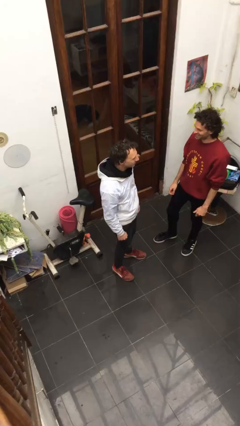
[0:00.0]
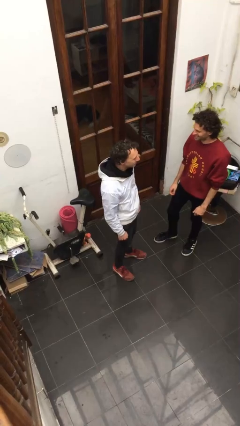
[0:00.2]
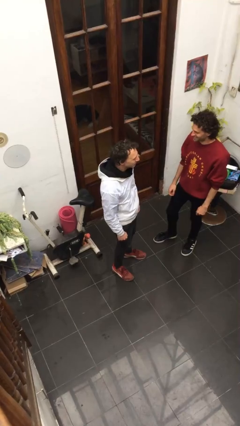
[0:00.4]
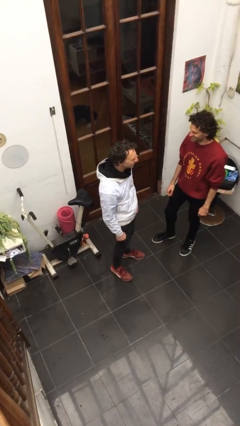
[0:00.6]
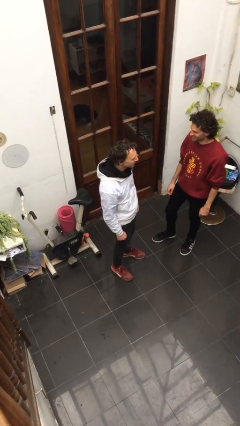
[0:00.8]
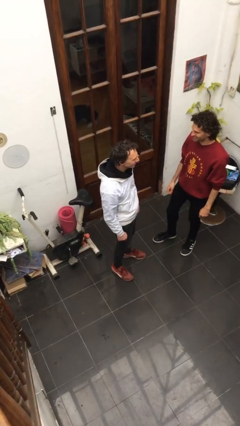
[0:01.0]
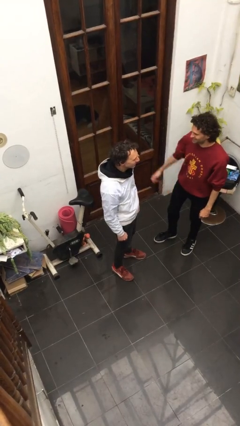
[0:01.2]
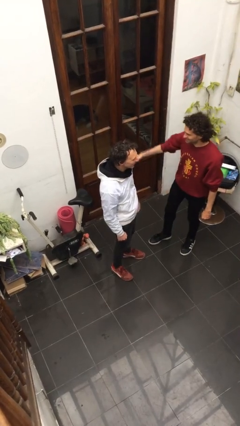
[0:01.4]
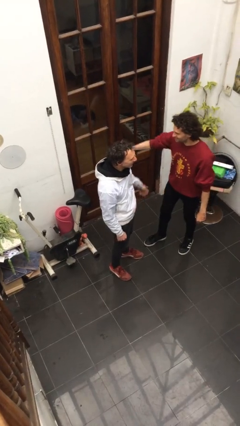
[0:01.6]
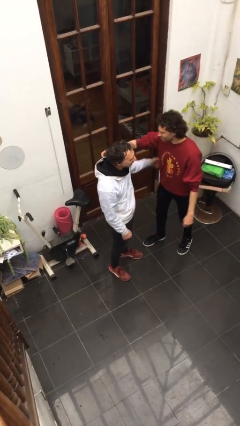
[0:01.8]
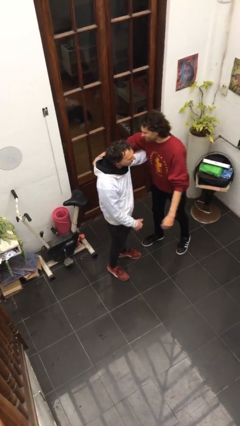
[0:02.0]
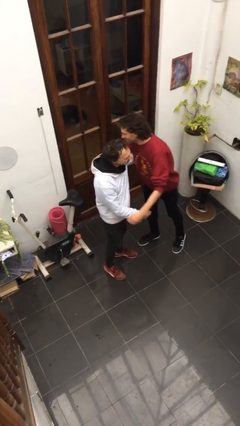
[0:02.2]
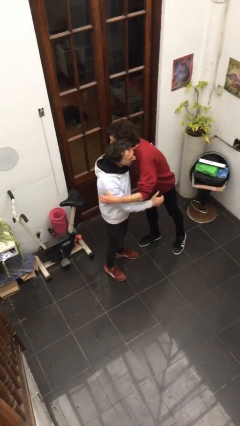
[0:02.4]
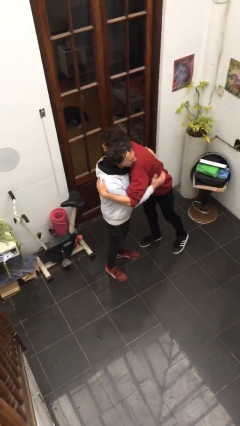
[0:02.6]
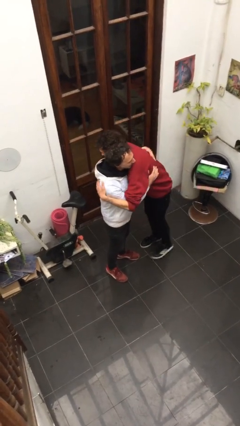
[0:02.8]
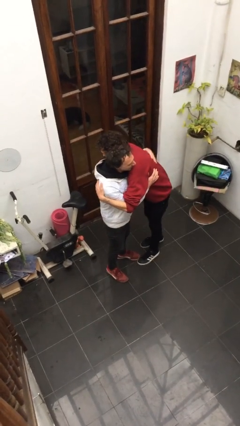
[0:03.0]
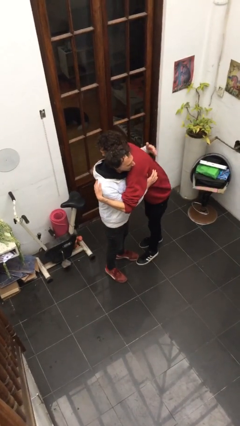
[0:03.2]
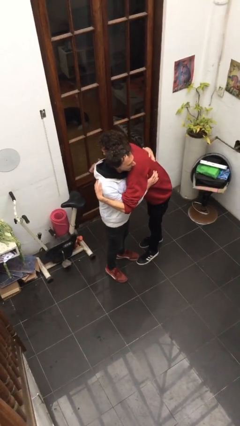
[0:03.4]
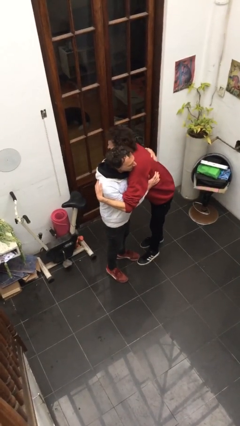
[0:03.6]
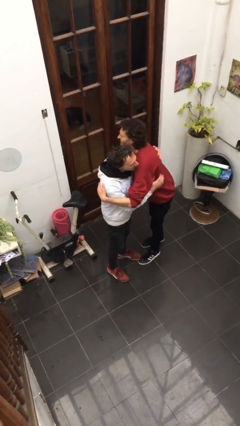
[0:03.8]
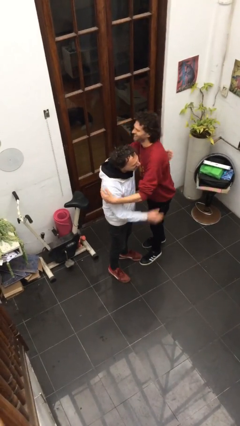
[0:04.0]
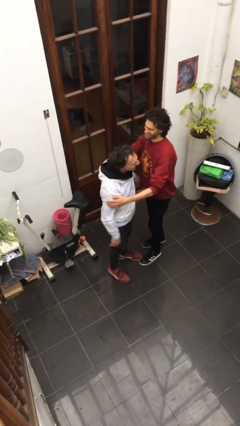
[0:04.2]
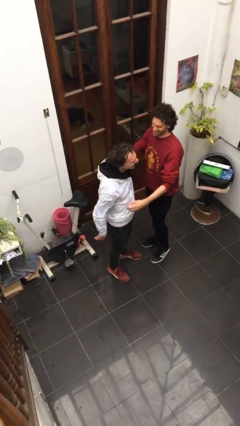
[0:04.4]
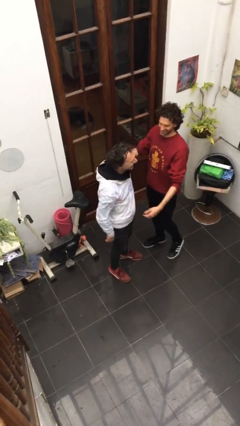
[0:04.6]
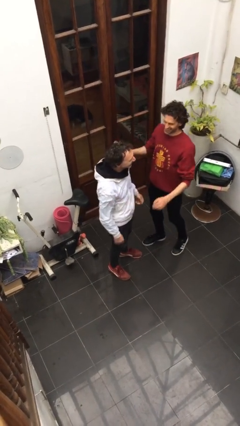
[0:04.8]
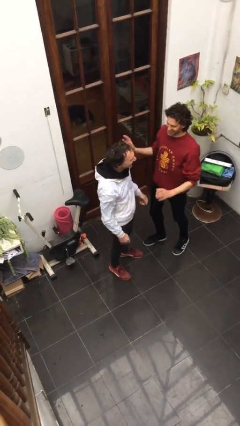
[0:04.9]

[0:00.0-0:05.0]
person embraces person

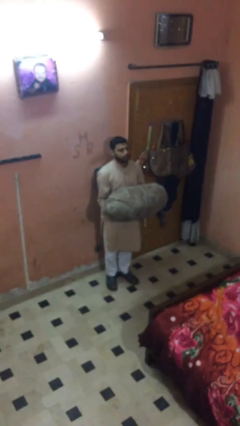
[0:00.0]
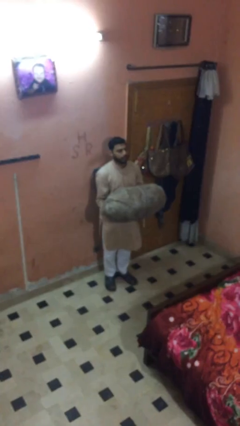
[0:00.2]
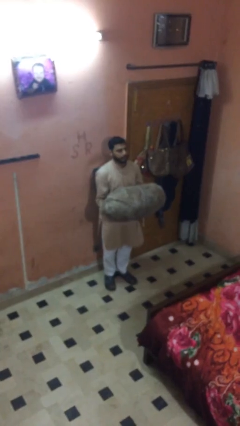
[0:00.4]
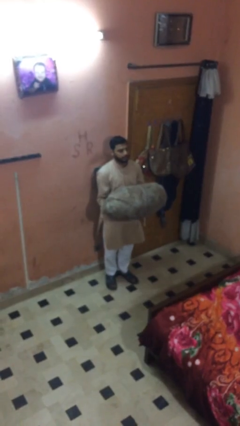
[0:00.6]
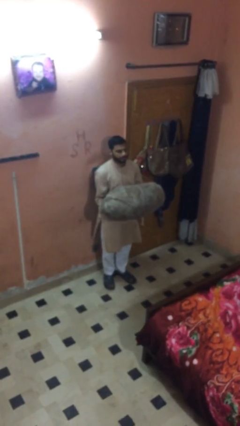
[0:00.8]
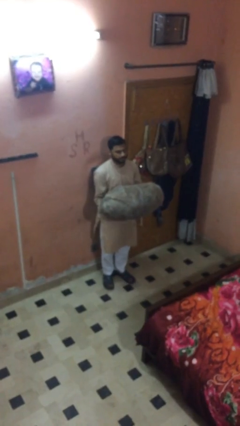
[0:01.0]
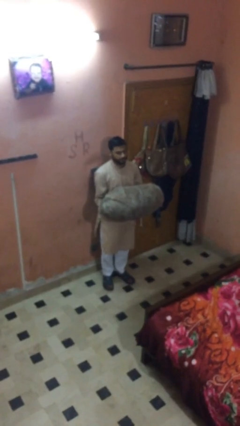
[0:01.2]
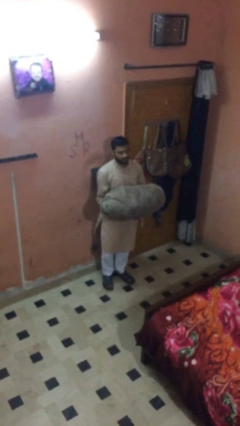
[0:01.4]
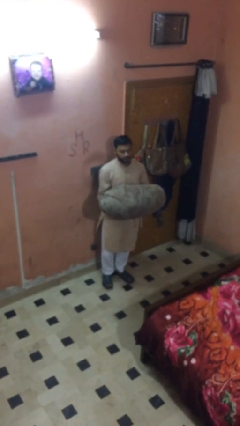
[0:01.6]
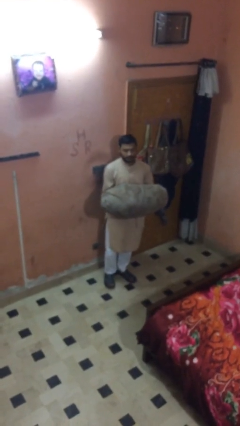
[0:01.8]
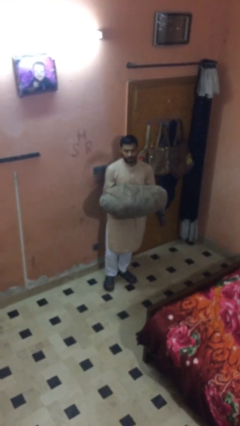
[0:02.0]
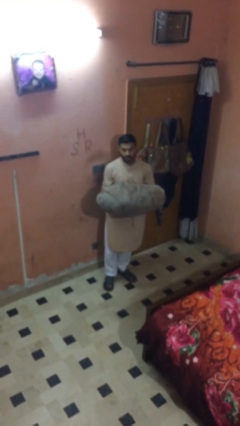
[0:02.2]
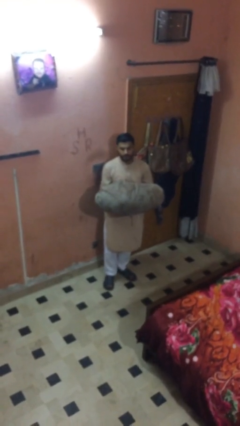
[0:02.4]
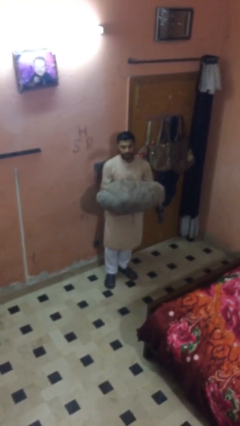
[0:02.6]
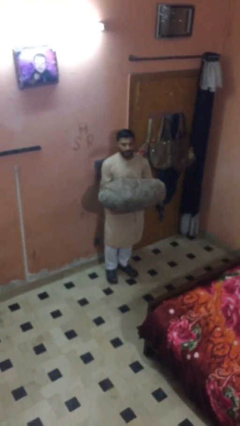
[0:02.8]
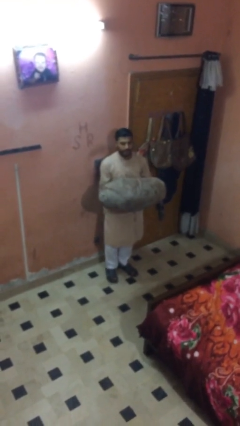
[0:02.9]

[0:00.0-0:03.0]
person carries heavy object

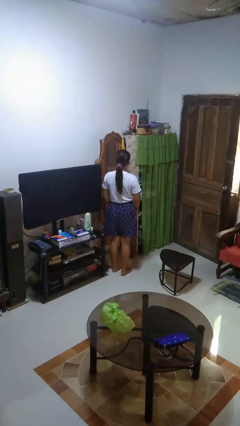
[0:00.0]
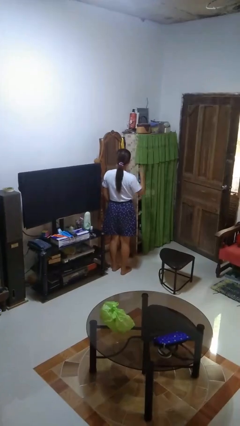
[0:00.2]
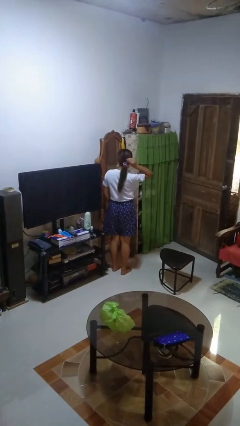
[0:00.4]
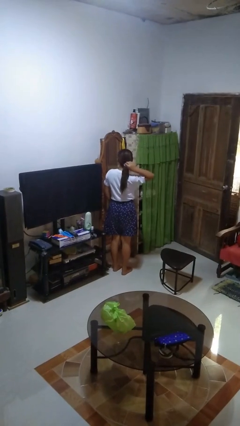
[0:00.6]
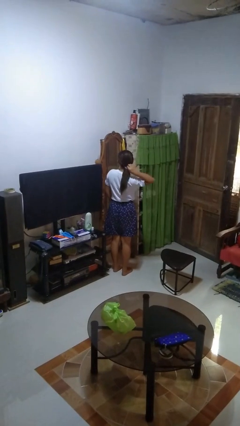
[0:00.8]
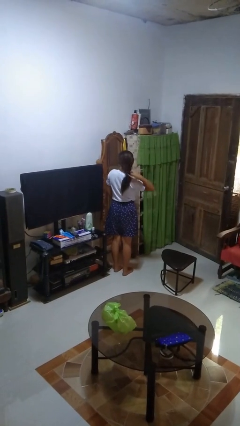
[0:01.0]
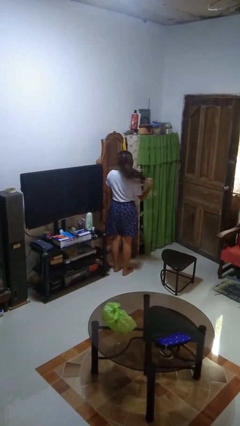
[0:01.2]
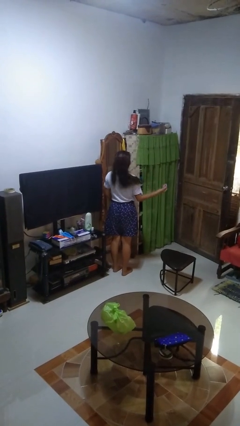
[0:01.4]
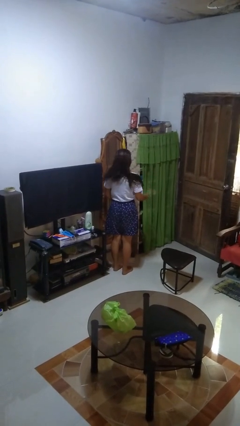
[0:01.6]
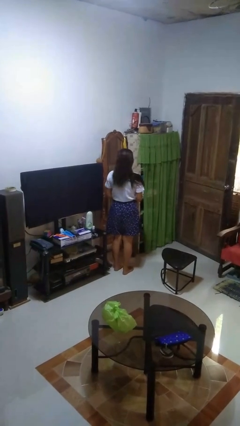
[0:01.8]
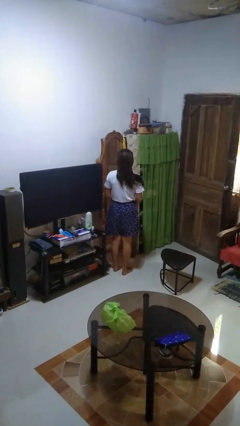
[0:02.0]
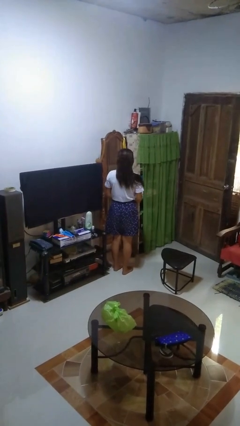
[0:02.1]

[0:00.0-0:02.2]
person takes off hairtie

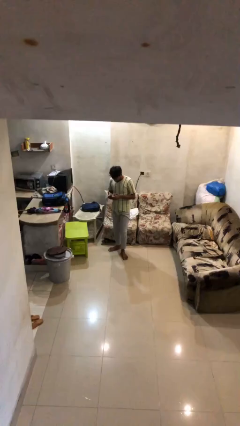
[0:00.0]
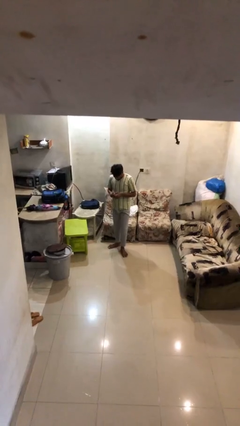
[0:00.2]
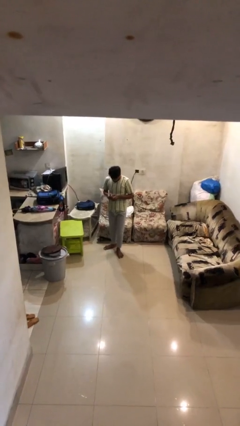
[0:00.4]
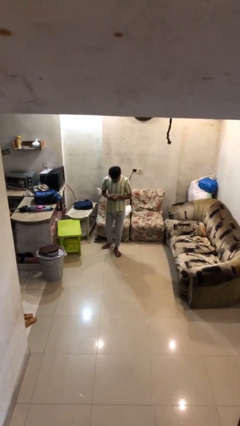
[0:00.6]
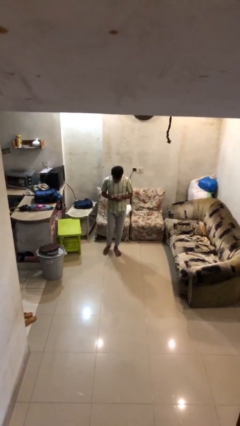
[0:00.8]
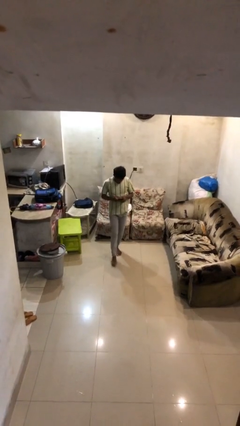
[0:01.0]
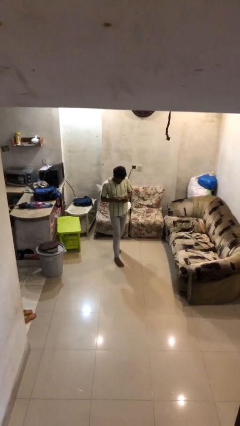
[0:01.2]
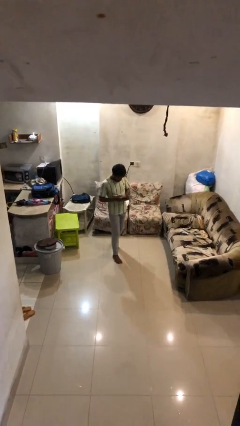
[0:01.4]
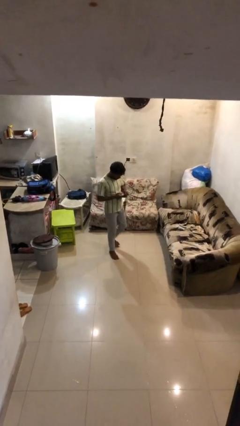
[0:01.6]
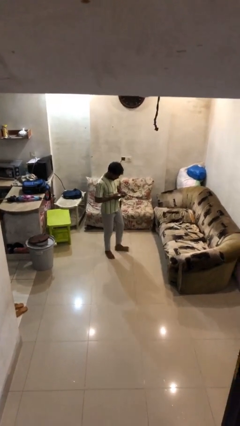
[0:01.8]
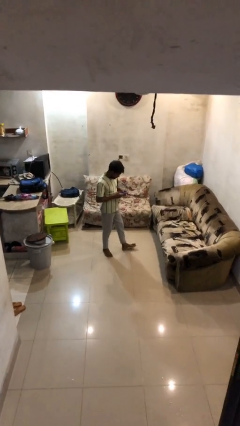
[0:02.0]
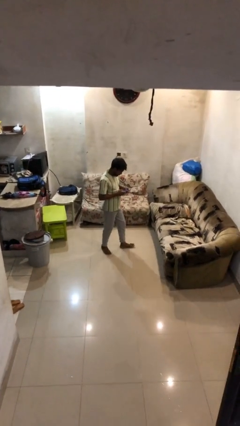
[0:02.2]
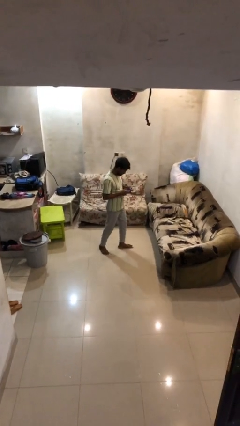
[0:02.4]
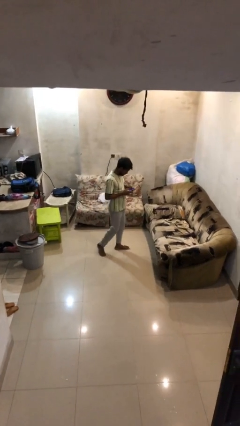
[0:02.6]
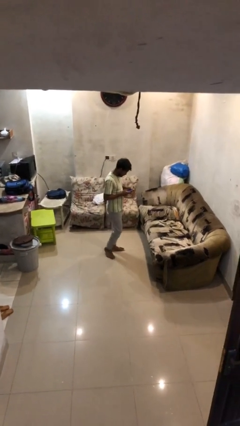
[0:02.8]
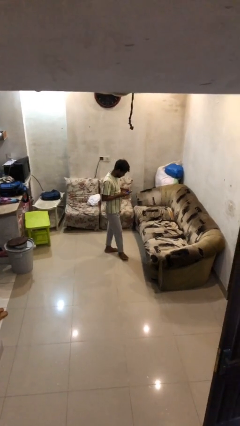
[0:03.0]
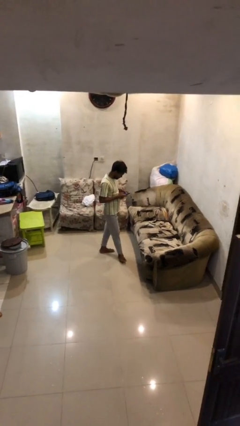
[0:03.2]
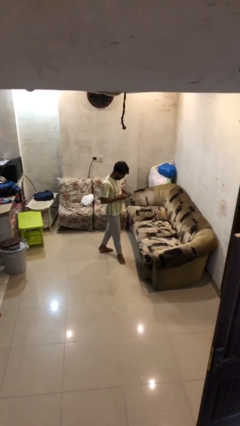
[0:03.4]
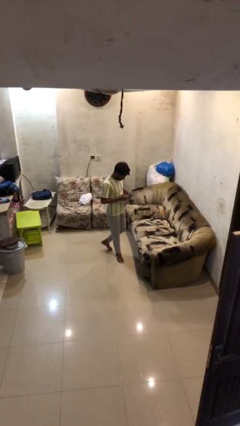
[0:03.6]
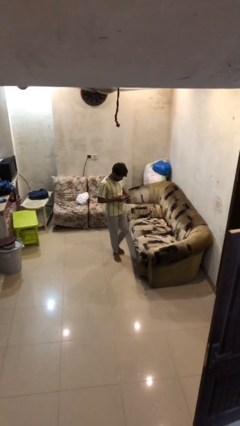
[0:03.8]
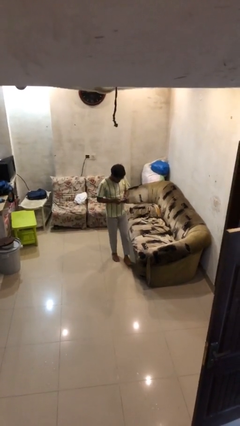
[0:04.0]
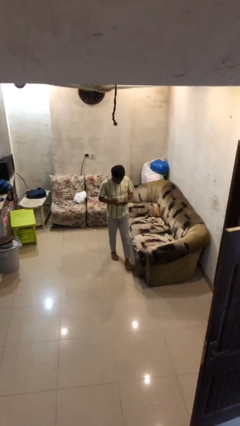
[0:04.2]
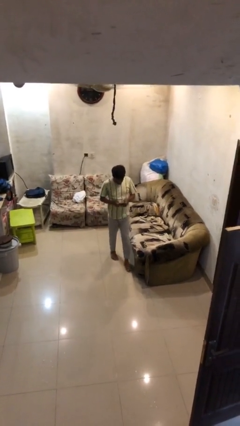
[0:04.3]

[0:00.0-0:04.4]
person texts on phone

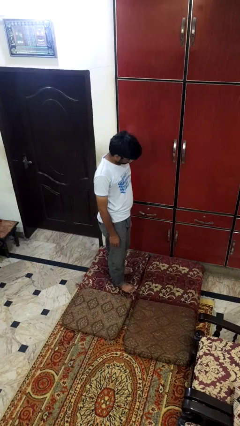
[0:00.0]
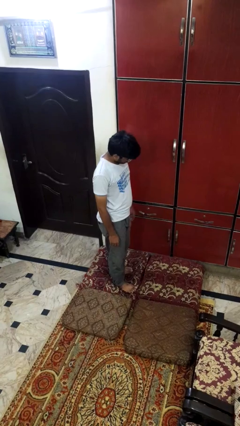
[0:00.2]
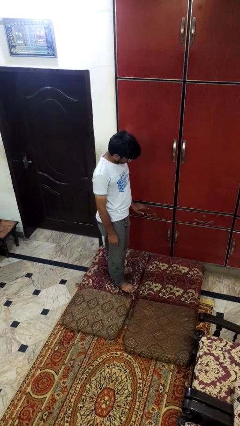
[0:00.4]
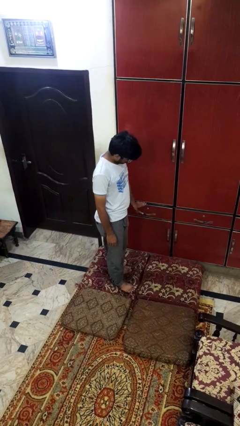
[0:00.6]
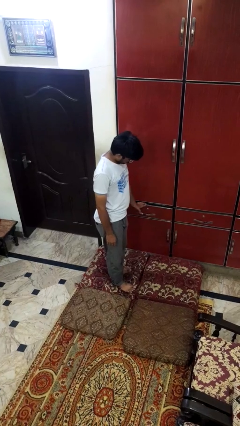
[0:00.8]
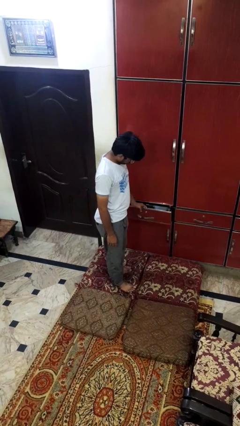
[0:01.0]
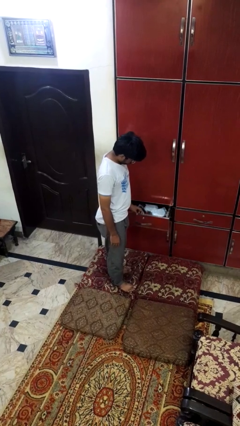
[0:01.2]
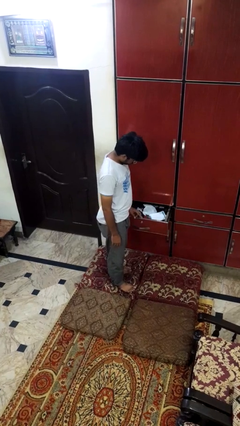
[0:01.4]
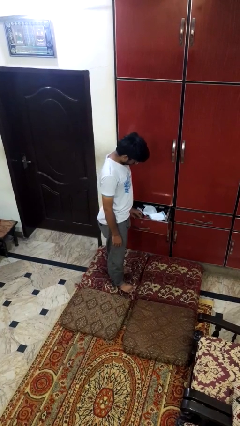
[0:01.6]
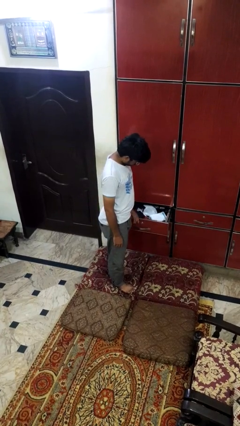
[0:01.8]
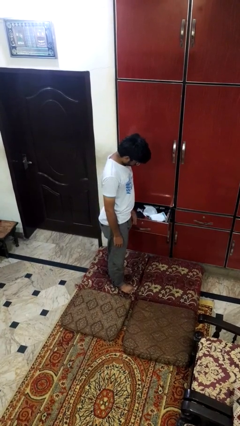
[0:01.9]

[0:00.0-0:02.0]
person opens dresser drawer

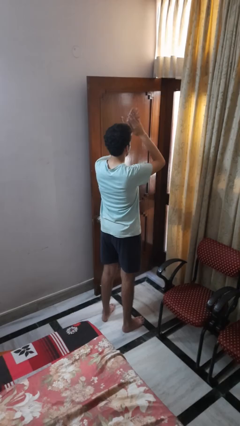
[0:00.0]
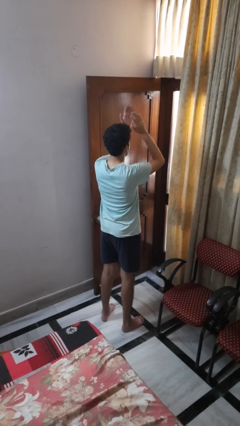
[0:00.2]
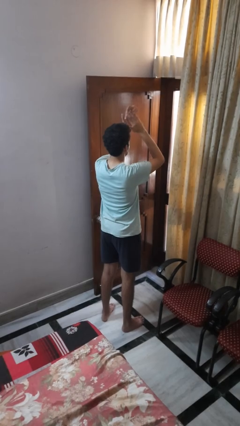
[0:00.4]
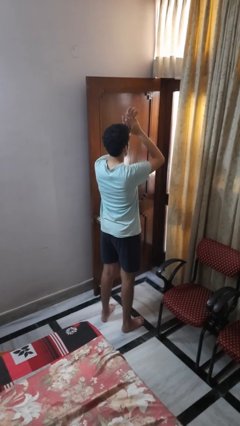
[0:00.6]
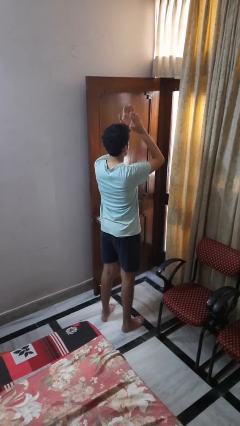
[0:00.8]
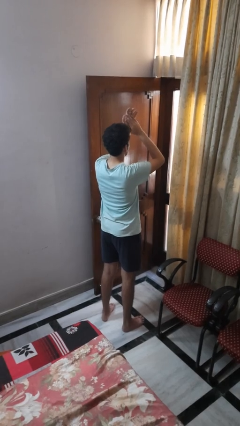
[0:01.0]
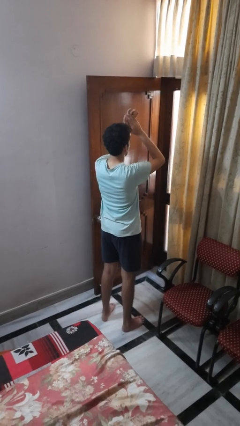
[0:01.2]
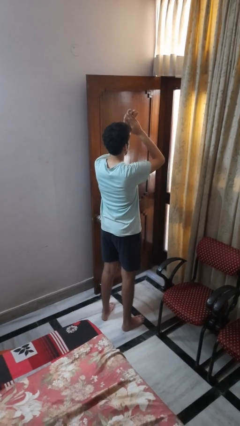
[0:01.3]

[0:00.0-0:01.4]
person claps hands
